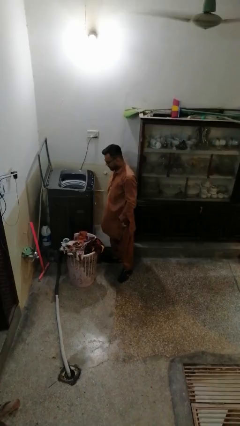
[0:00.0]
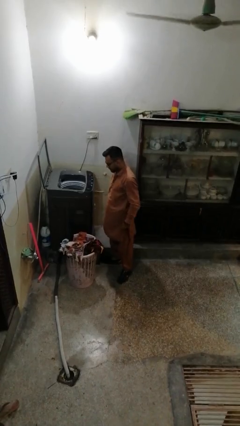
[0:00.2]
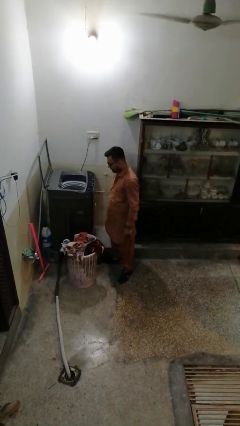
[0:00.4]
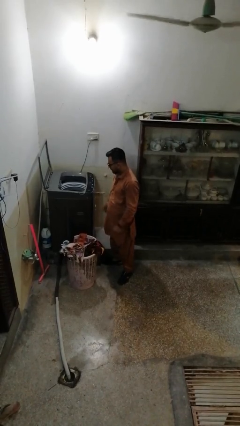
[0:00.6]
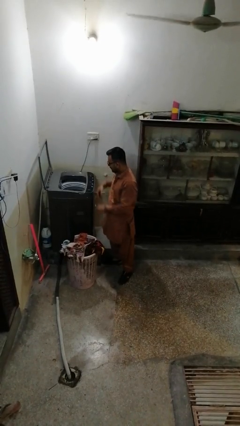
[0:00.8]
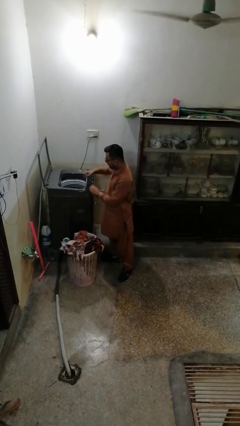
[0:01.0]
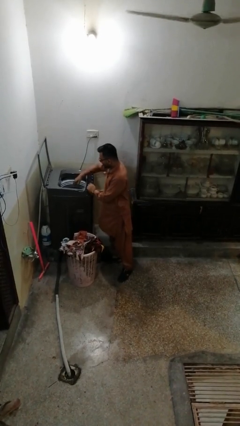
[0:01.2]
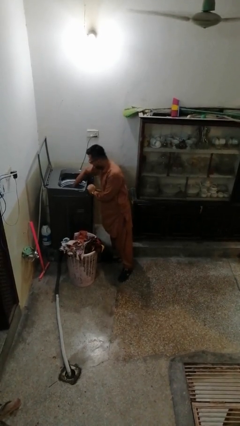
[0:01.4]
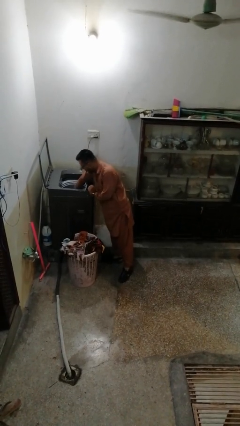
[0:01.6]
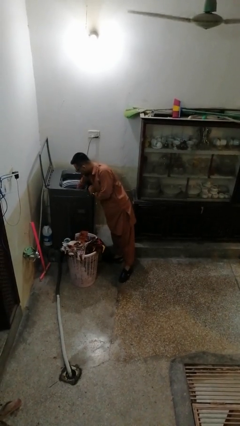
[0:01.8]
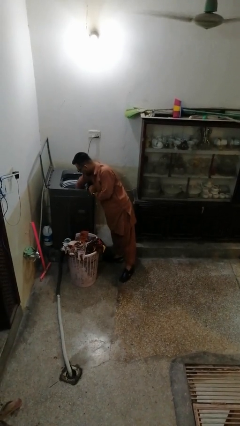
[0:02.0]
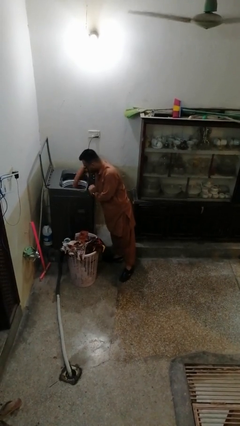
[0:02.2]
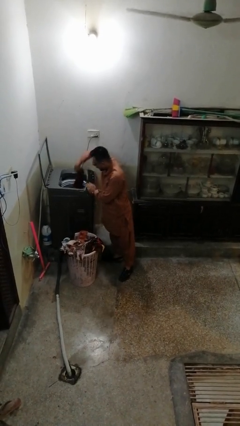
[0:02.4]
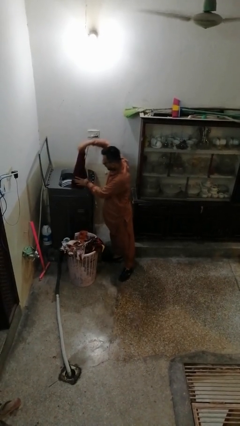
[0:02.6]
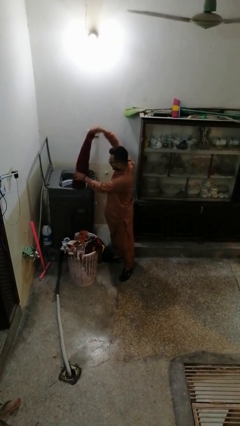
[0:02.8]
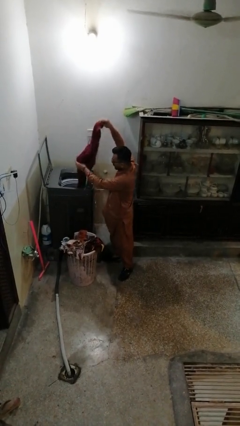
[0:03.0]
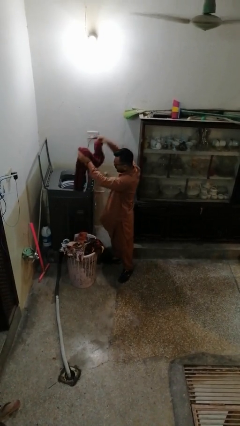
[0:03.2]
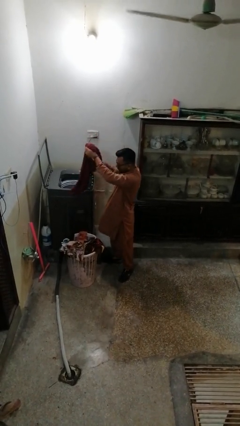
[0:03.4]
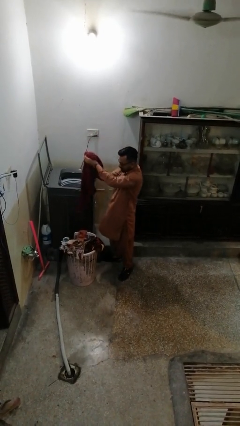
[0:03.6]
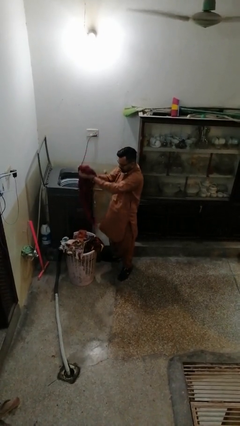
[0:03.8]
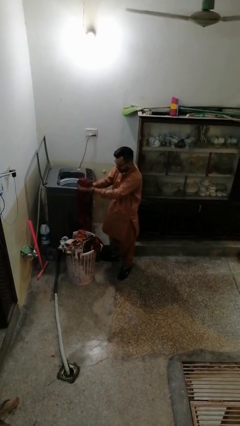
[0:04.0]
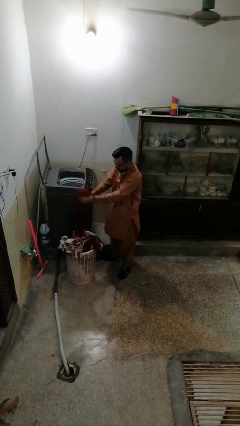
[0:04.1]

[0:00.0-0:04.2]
person unloads dryer

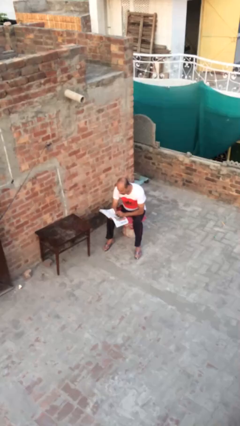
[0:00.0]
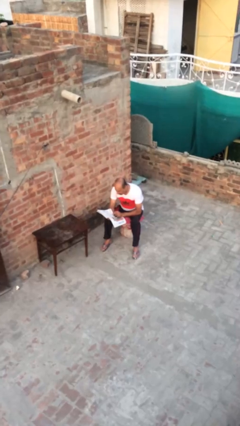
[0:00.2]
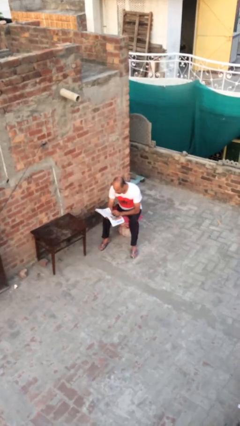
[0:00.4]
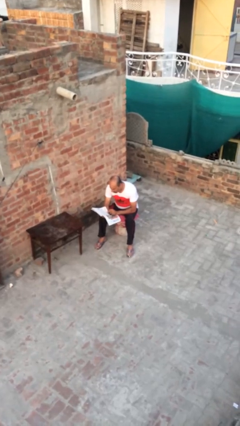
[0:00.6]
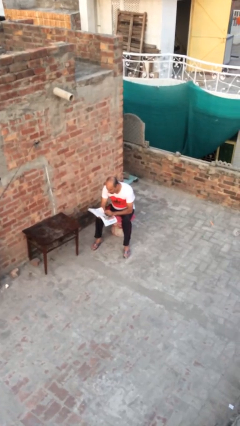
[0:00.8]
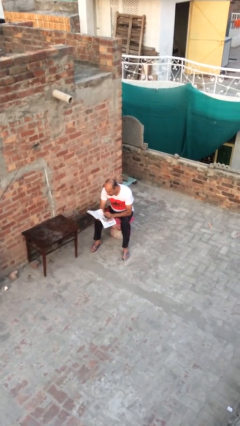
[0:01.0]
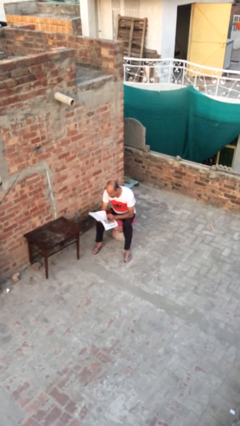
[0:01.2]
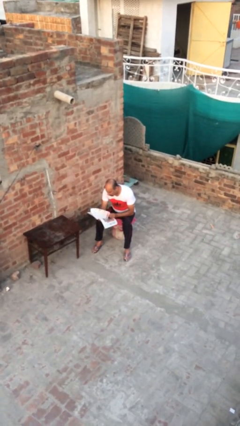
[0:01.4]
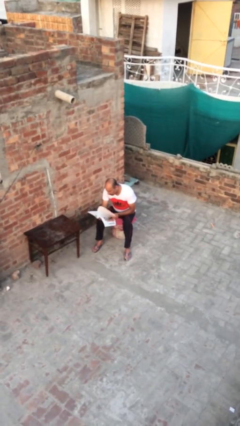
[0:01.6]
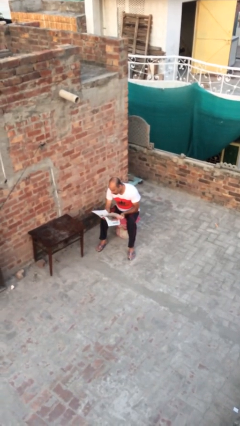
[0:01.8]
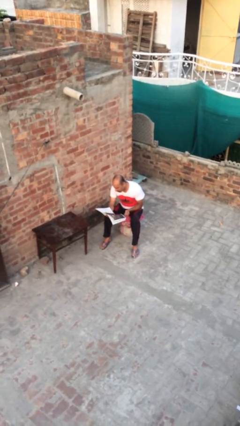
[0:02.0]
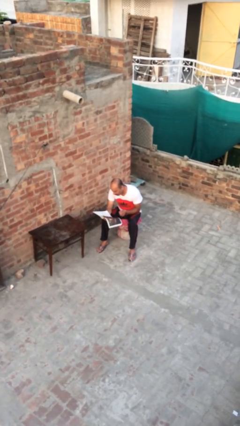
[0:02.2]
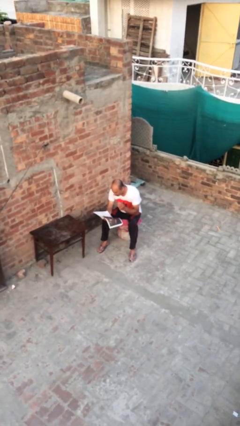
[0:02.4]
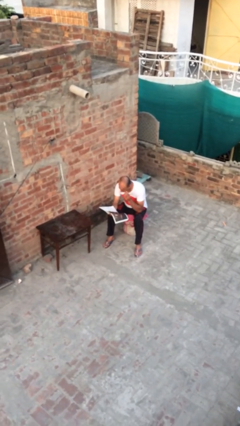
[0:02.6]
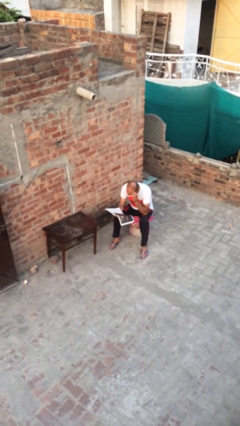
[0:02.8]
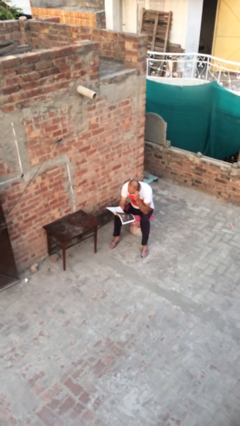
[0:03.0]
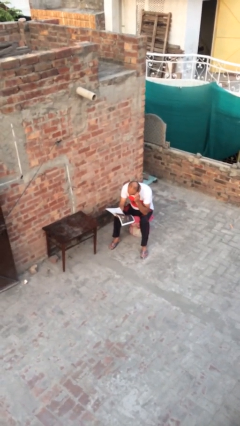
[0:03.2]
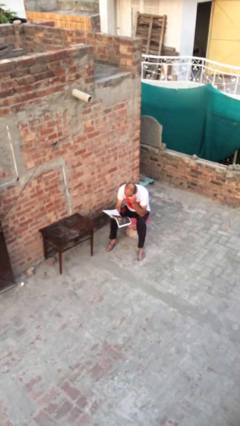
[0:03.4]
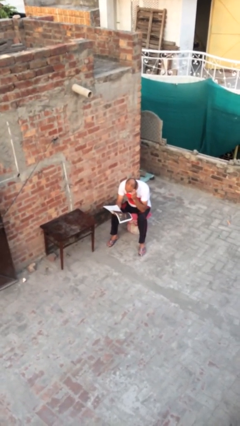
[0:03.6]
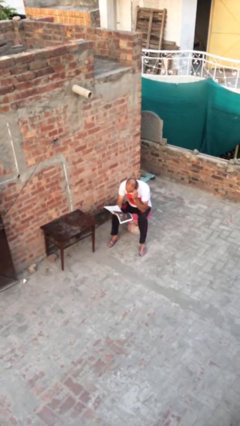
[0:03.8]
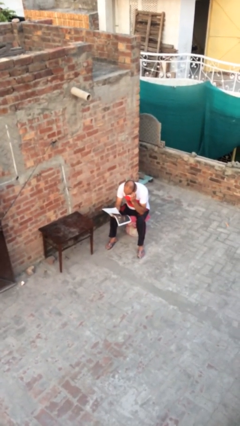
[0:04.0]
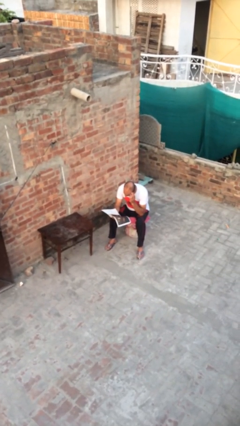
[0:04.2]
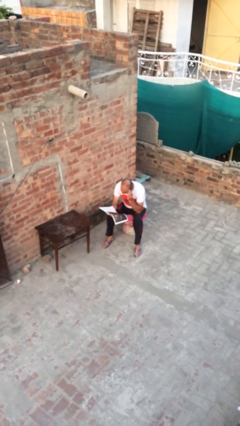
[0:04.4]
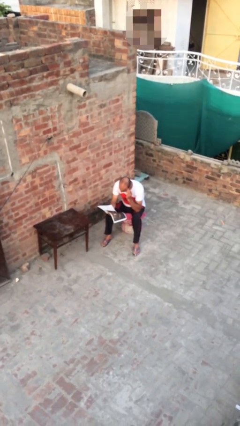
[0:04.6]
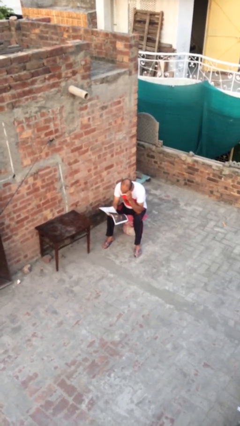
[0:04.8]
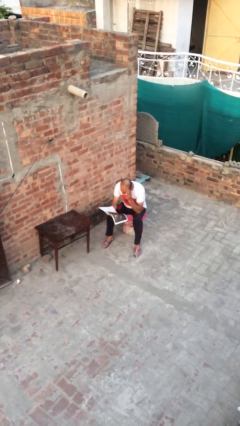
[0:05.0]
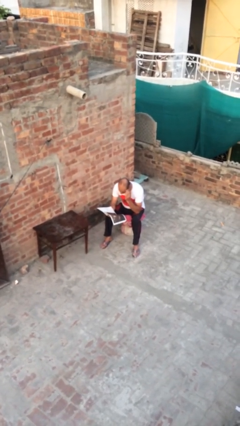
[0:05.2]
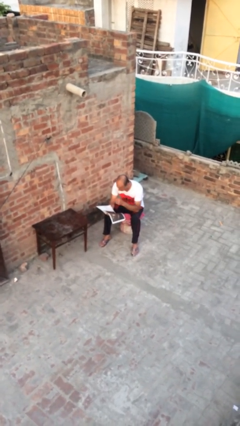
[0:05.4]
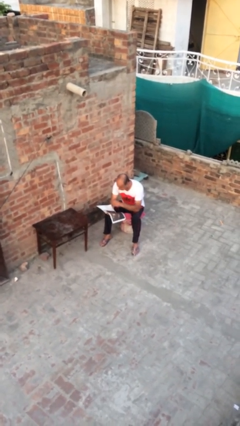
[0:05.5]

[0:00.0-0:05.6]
person reads document

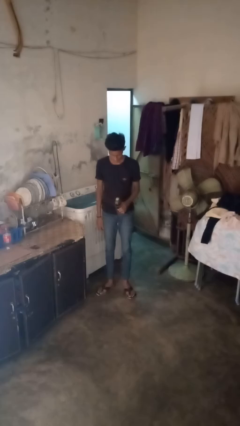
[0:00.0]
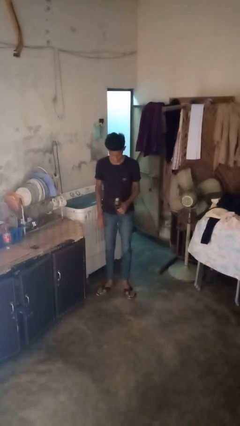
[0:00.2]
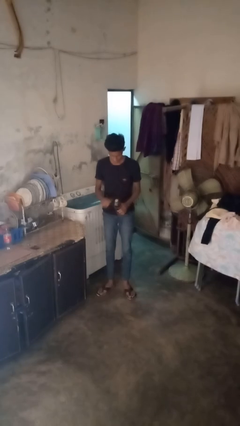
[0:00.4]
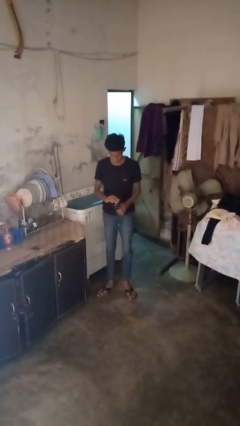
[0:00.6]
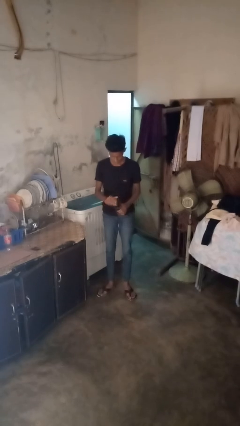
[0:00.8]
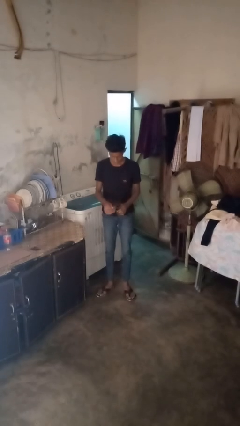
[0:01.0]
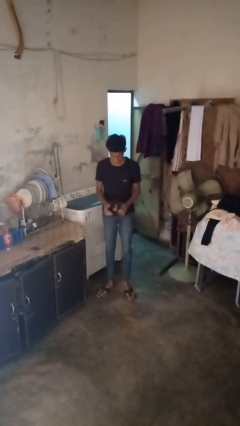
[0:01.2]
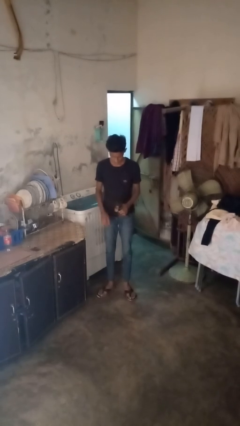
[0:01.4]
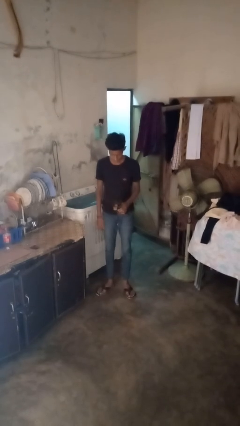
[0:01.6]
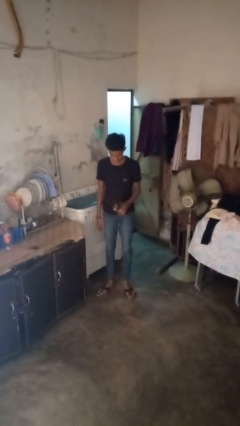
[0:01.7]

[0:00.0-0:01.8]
person opens can with can opener

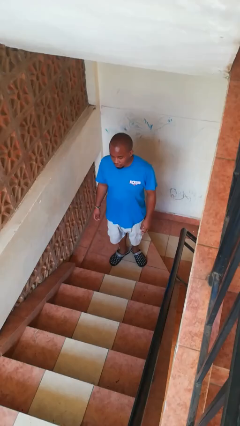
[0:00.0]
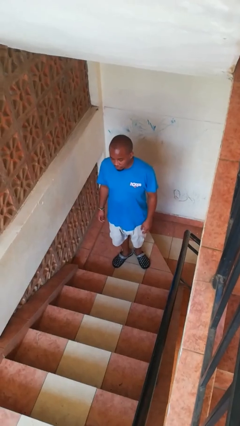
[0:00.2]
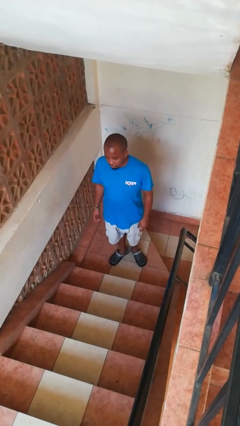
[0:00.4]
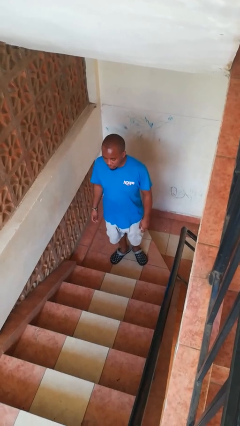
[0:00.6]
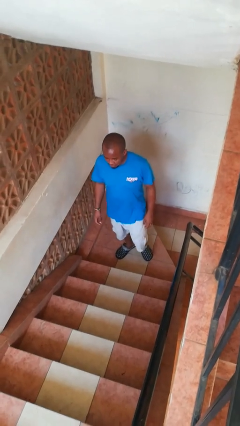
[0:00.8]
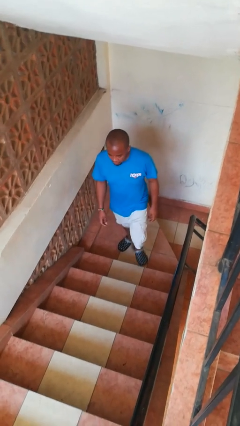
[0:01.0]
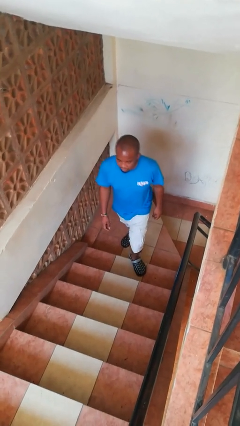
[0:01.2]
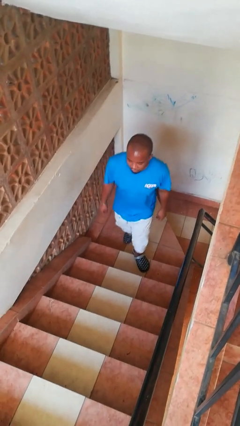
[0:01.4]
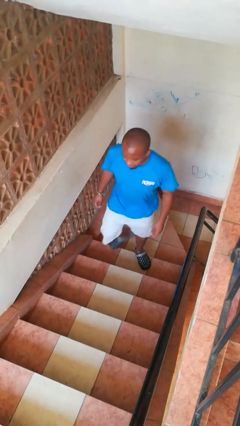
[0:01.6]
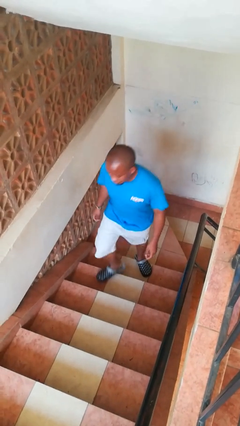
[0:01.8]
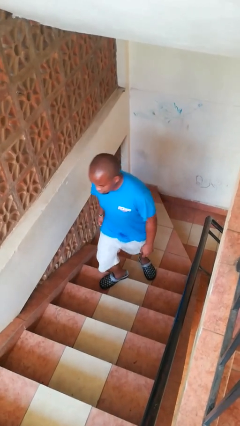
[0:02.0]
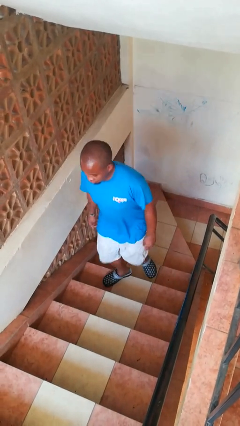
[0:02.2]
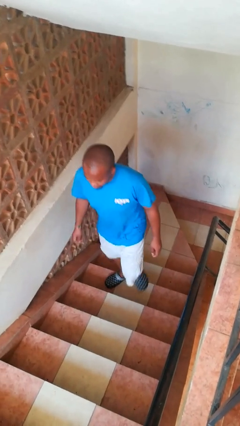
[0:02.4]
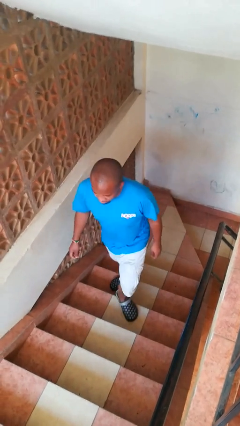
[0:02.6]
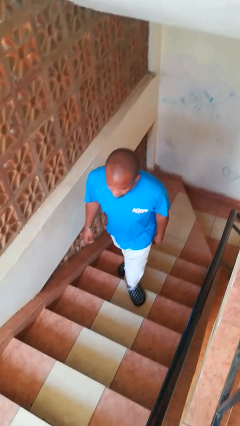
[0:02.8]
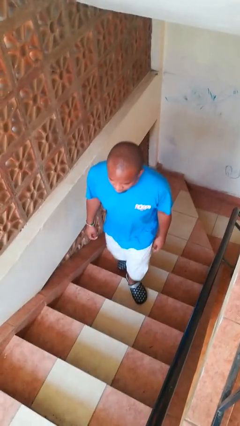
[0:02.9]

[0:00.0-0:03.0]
person climbs up stairs

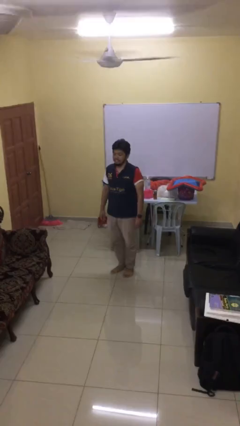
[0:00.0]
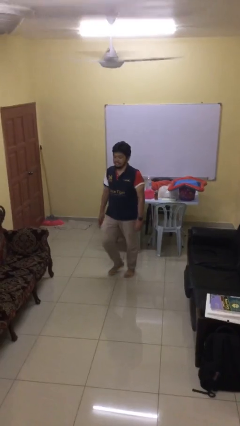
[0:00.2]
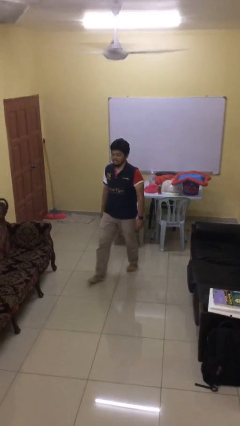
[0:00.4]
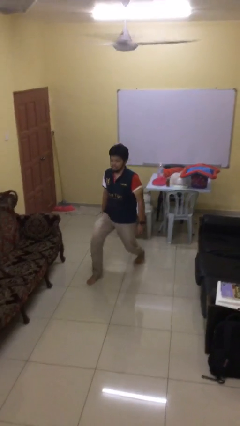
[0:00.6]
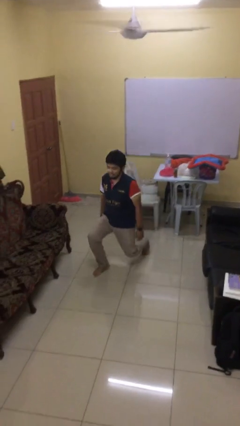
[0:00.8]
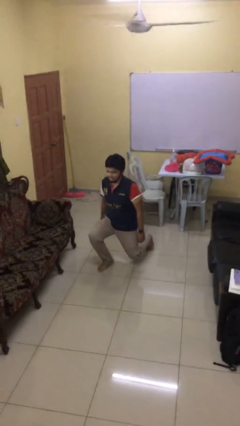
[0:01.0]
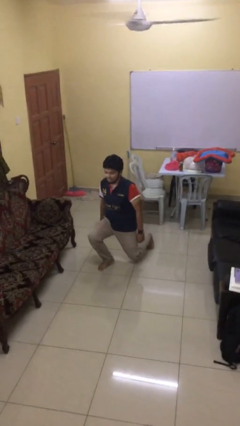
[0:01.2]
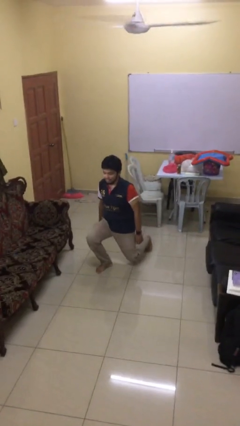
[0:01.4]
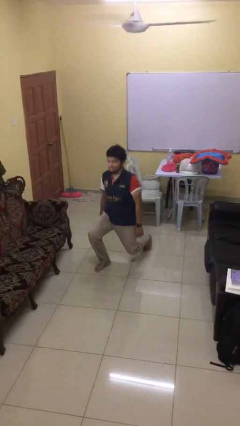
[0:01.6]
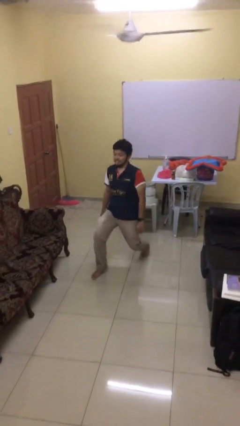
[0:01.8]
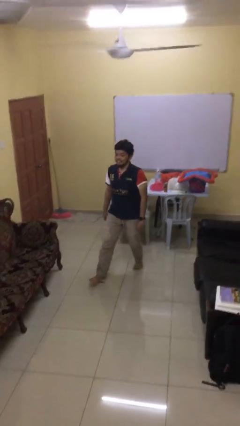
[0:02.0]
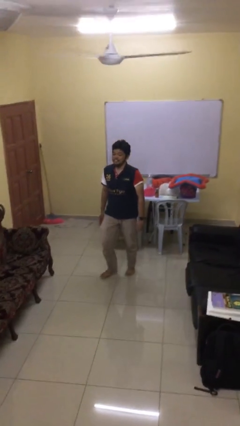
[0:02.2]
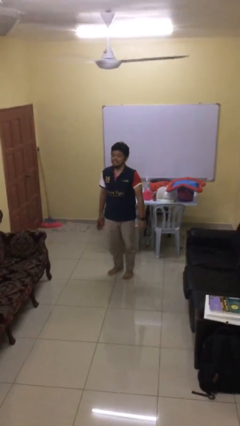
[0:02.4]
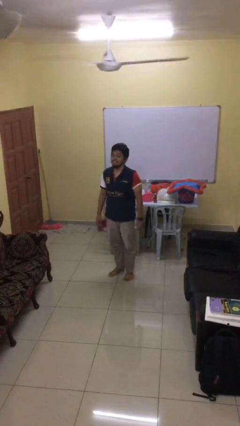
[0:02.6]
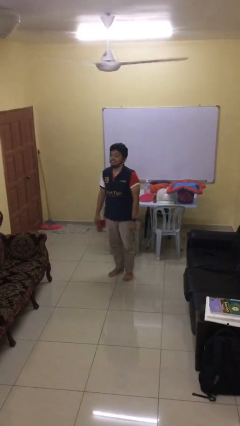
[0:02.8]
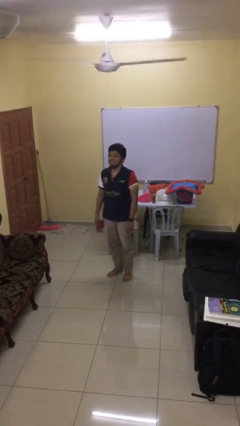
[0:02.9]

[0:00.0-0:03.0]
person exercises with lunges

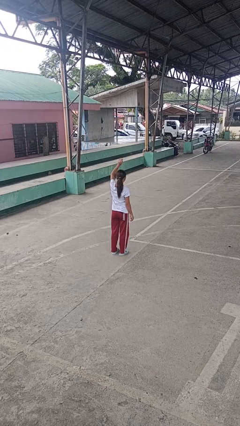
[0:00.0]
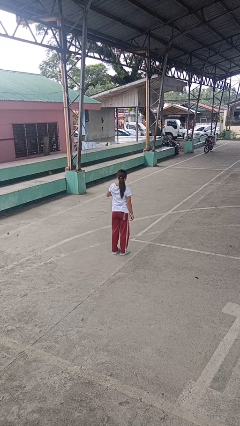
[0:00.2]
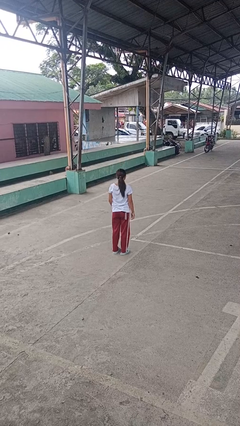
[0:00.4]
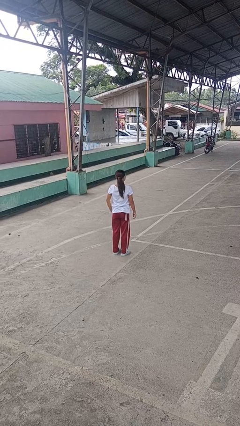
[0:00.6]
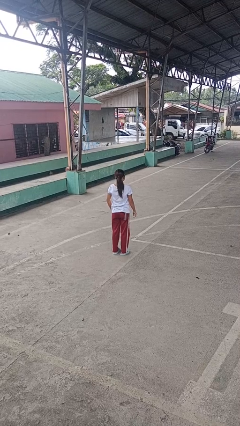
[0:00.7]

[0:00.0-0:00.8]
person gestures lower hand
